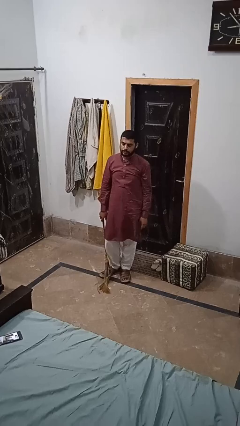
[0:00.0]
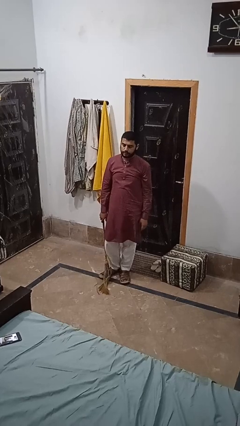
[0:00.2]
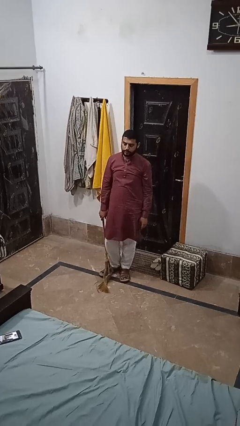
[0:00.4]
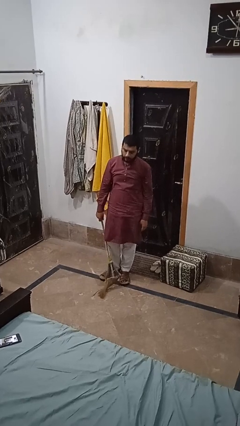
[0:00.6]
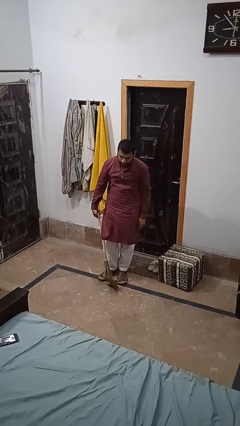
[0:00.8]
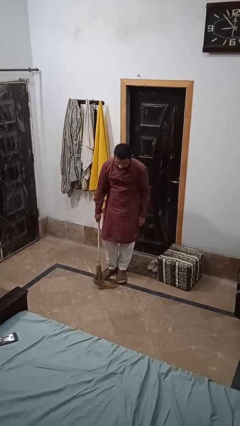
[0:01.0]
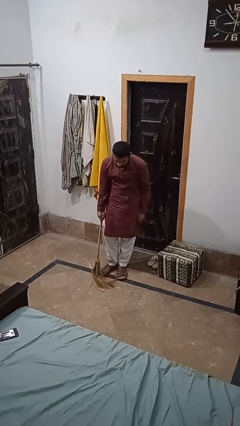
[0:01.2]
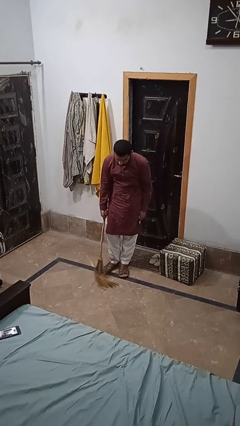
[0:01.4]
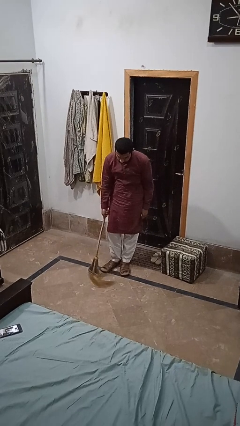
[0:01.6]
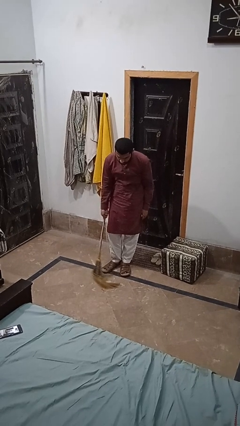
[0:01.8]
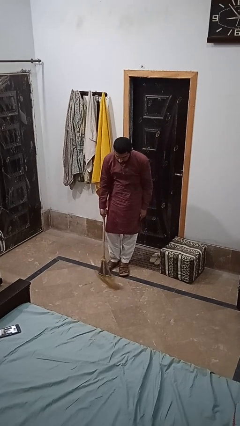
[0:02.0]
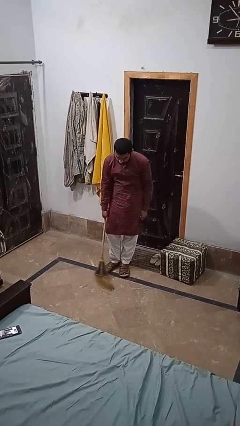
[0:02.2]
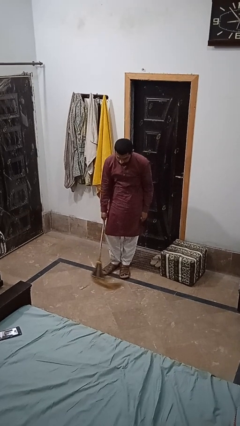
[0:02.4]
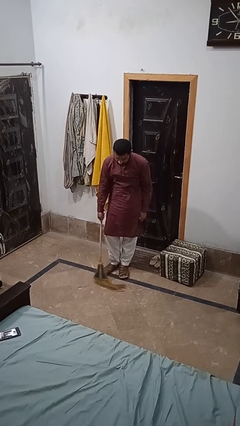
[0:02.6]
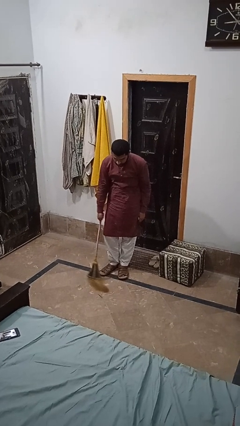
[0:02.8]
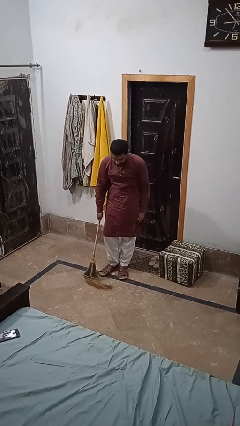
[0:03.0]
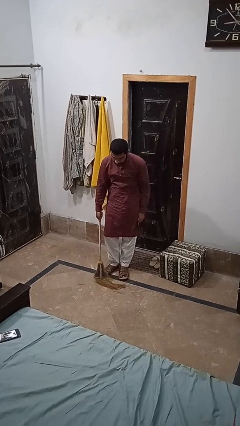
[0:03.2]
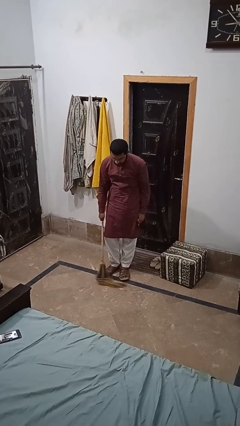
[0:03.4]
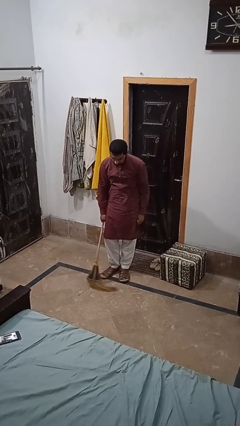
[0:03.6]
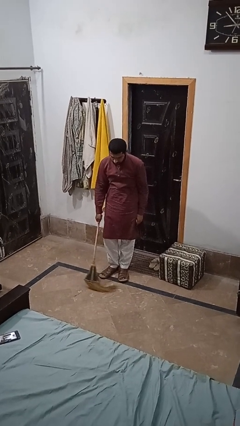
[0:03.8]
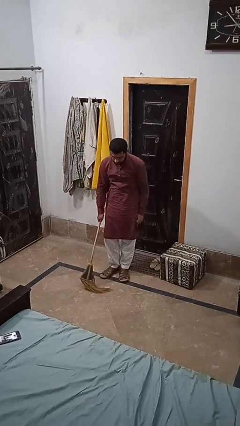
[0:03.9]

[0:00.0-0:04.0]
person mops

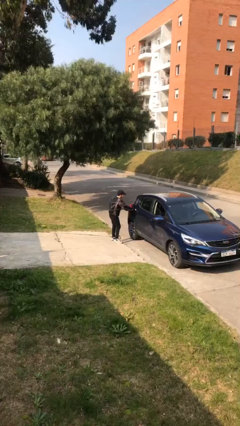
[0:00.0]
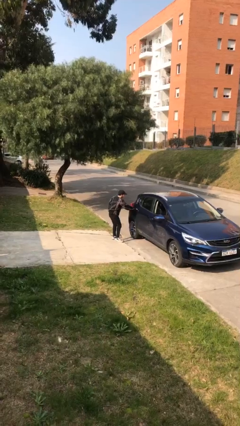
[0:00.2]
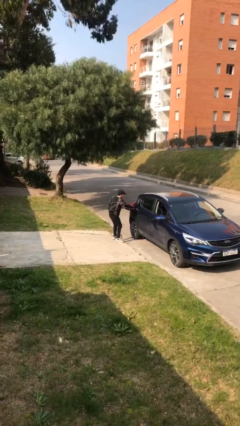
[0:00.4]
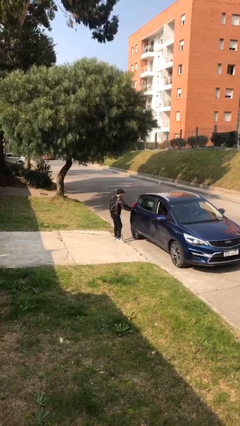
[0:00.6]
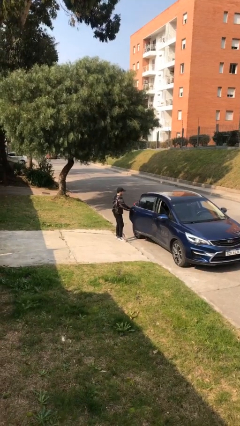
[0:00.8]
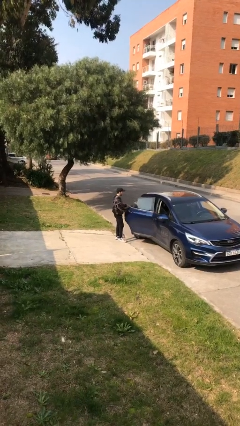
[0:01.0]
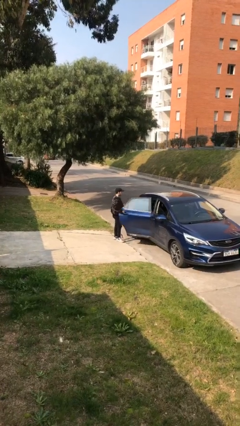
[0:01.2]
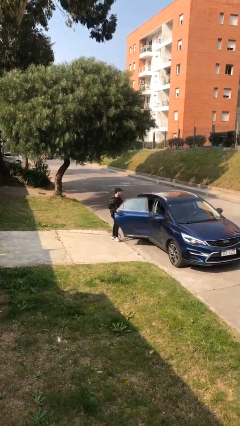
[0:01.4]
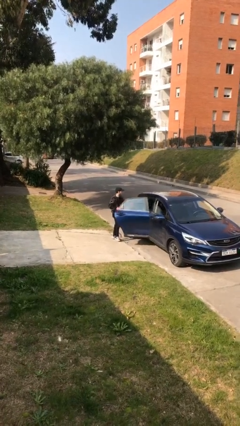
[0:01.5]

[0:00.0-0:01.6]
person opens car door

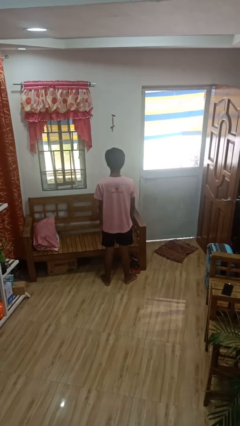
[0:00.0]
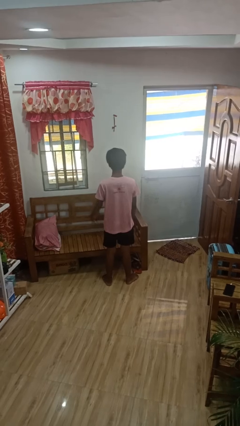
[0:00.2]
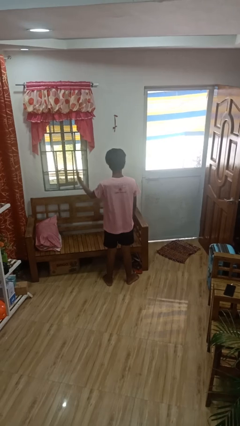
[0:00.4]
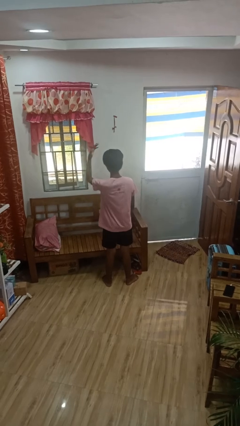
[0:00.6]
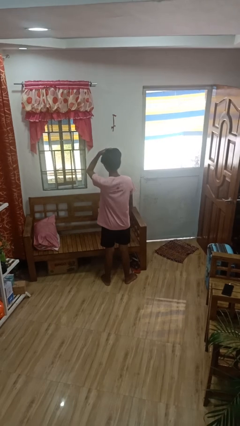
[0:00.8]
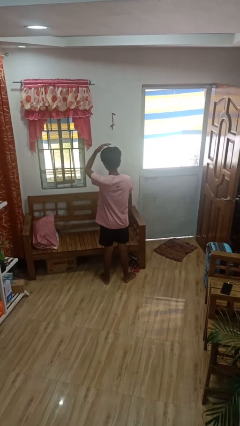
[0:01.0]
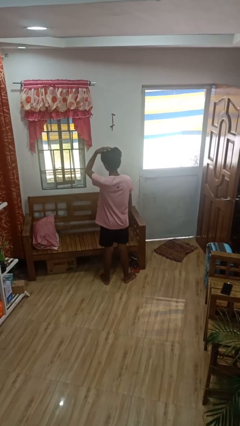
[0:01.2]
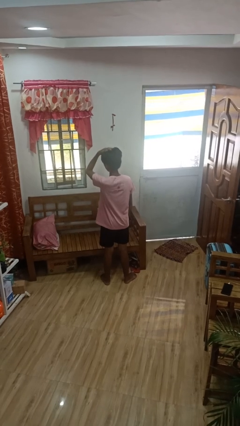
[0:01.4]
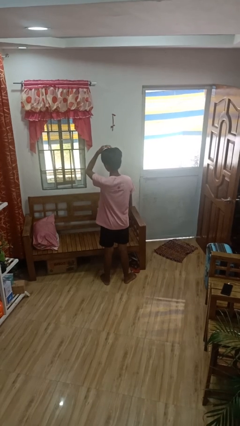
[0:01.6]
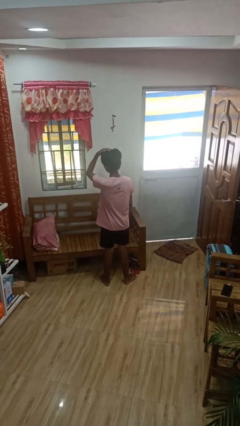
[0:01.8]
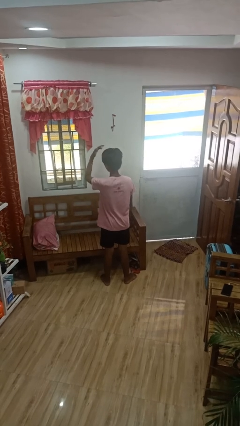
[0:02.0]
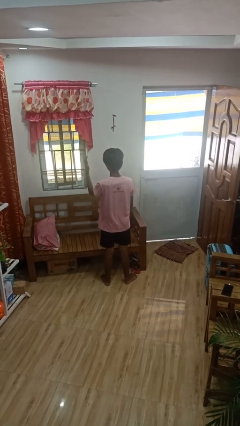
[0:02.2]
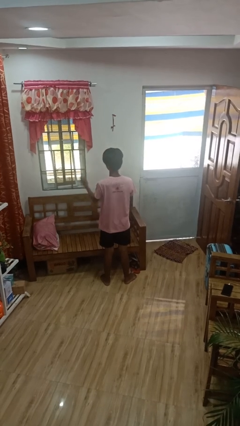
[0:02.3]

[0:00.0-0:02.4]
person pats head

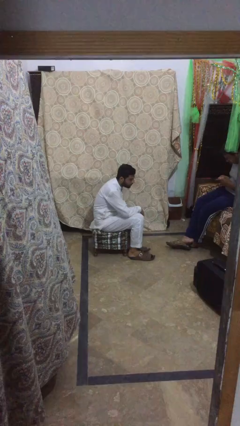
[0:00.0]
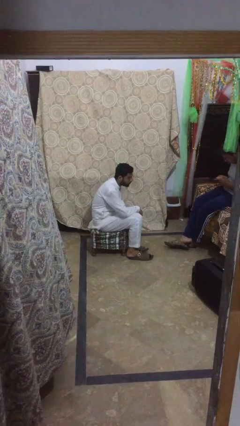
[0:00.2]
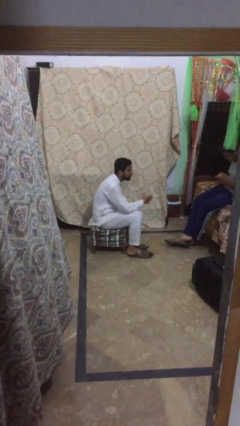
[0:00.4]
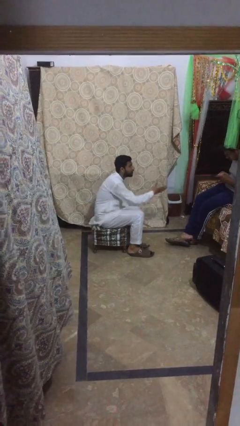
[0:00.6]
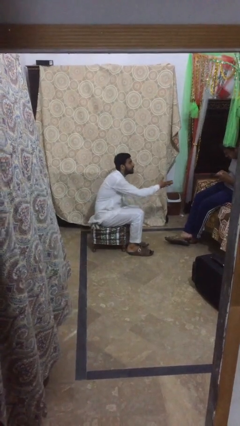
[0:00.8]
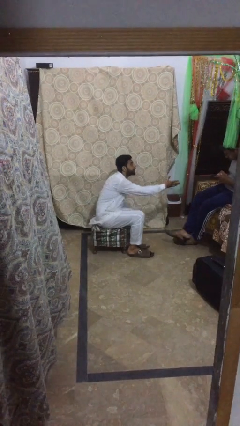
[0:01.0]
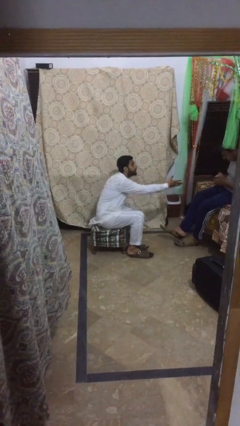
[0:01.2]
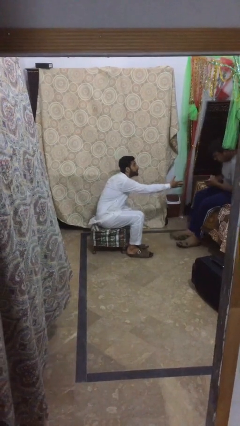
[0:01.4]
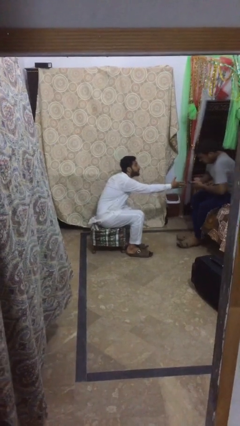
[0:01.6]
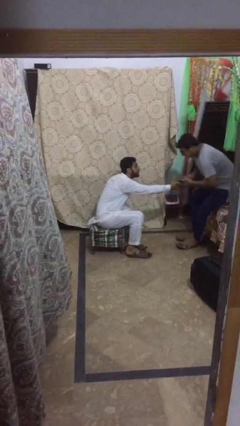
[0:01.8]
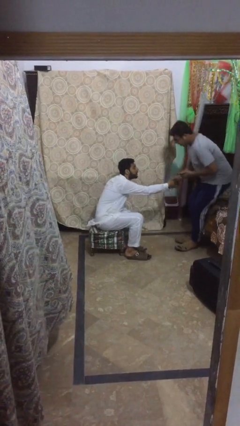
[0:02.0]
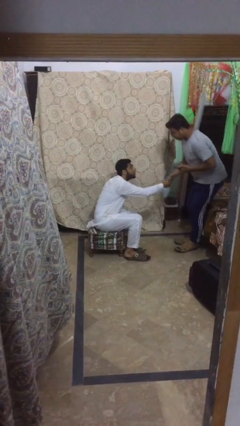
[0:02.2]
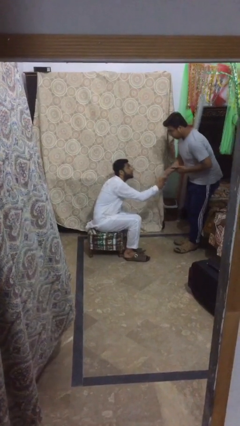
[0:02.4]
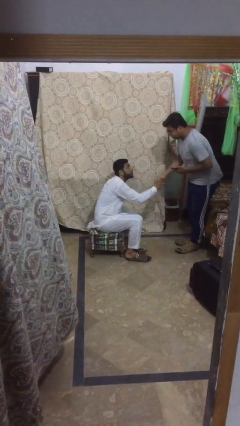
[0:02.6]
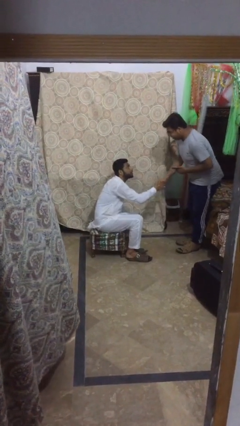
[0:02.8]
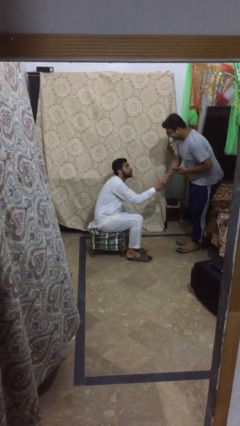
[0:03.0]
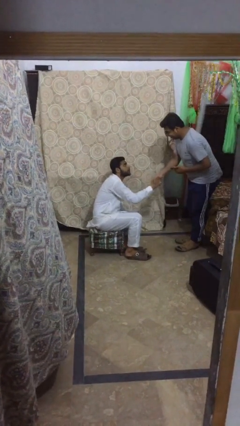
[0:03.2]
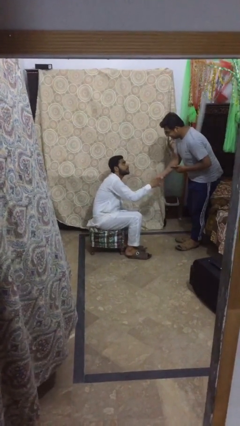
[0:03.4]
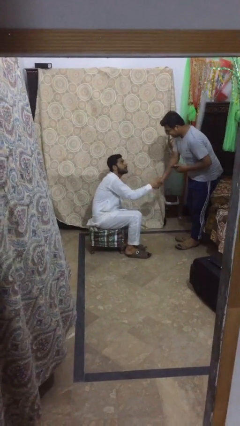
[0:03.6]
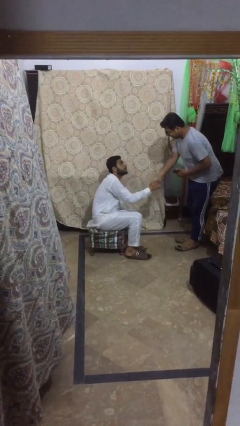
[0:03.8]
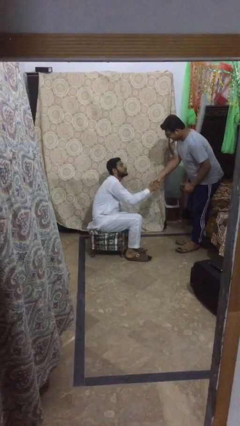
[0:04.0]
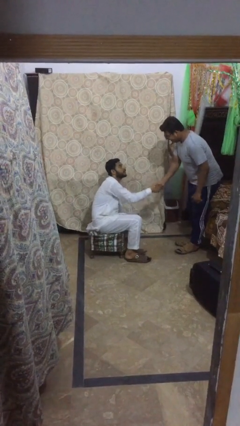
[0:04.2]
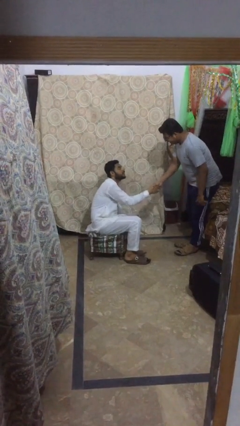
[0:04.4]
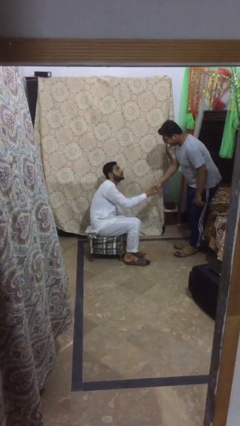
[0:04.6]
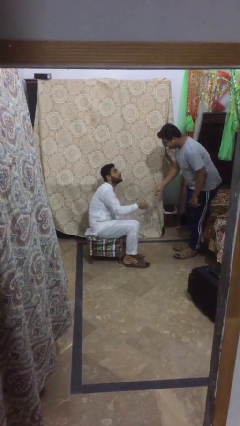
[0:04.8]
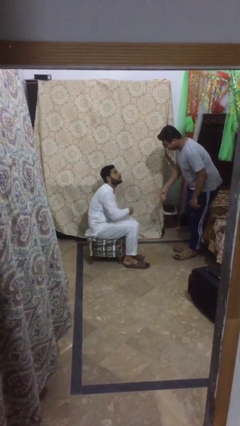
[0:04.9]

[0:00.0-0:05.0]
person shakes hand

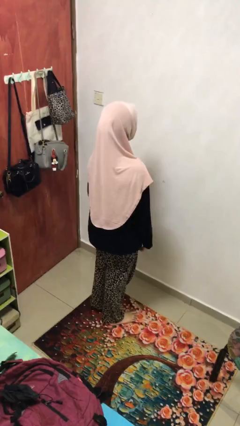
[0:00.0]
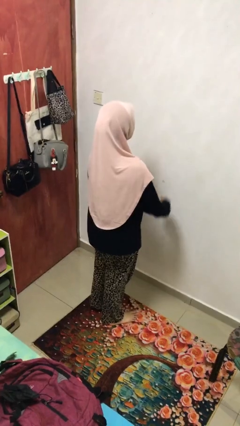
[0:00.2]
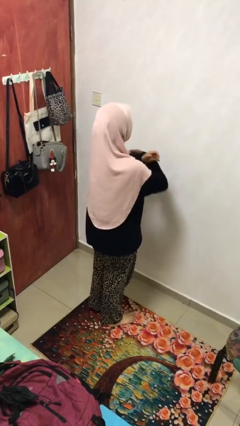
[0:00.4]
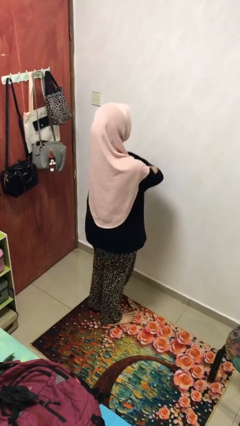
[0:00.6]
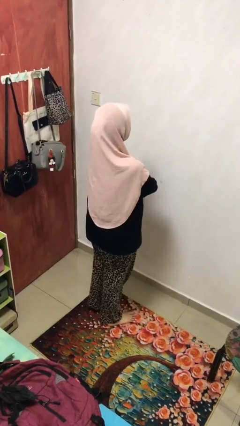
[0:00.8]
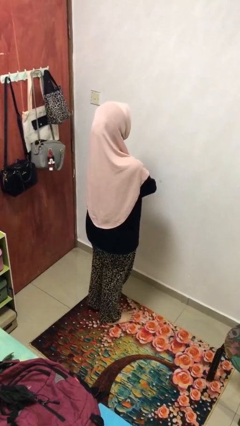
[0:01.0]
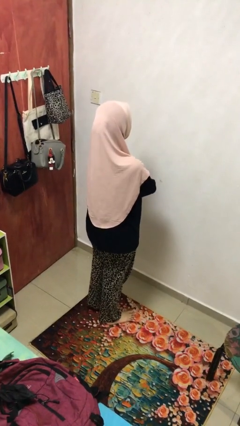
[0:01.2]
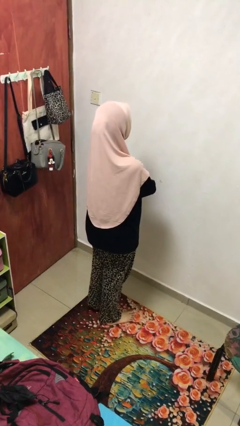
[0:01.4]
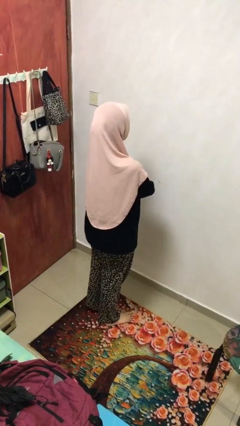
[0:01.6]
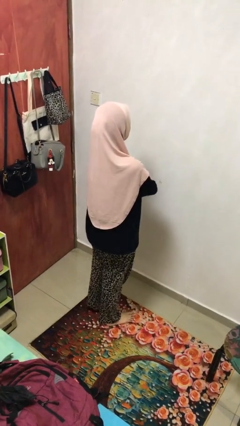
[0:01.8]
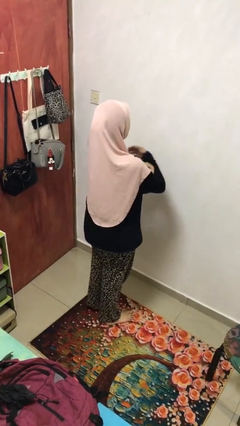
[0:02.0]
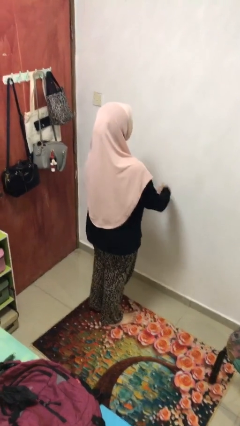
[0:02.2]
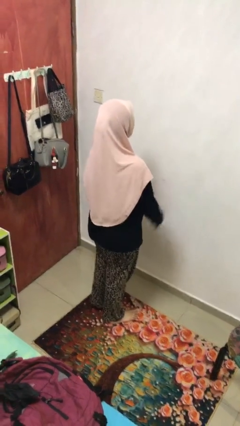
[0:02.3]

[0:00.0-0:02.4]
person crosses arms

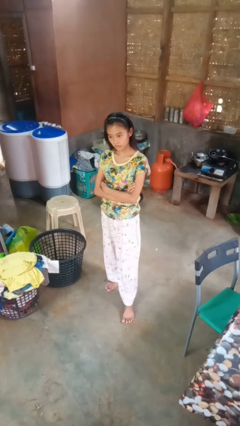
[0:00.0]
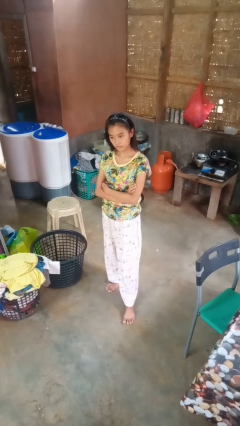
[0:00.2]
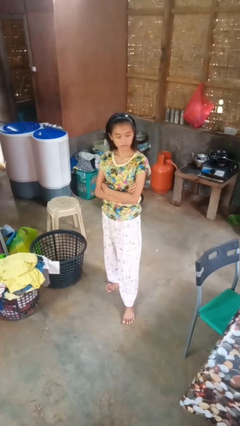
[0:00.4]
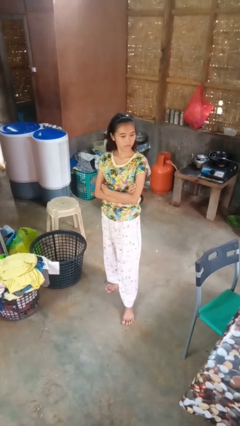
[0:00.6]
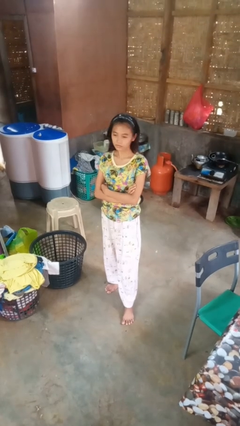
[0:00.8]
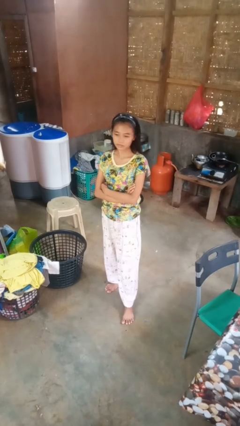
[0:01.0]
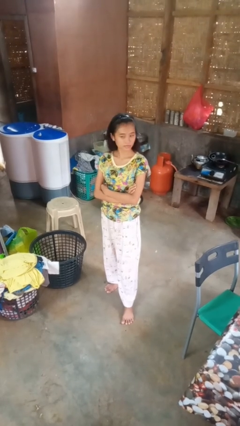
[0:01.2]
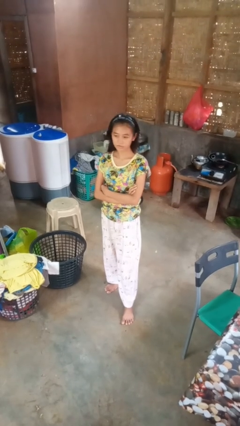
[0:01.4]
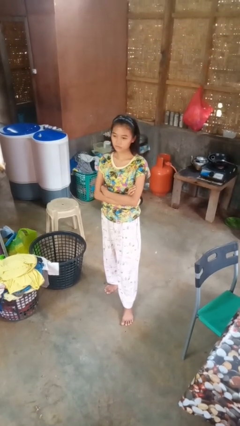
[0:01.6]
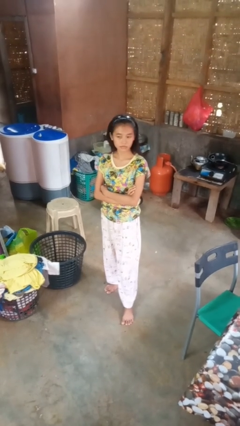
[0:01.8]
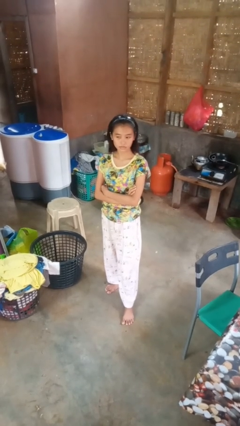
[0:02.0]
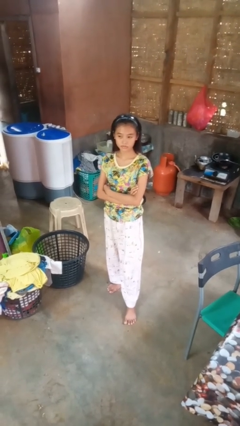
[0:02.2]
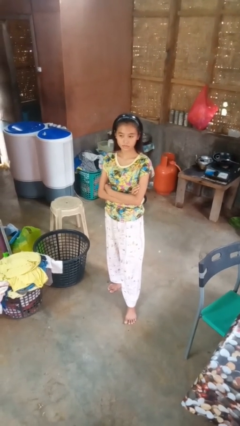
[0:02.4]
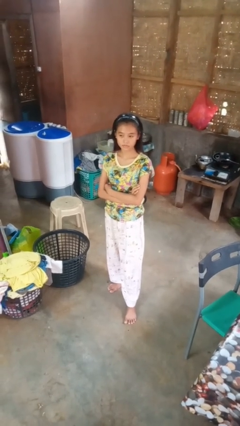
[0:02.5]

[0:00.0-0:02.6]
person shakes head
